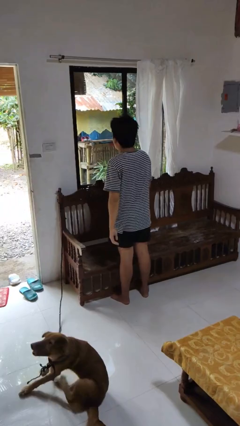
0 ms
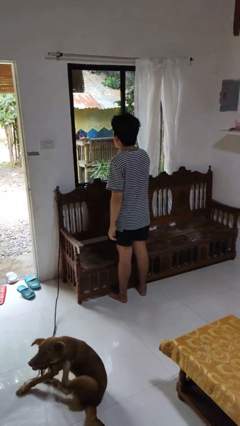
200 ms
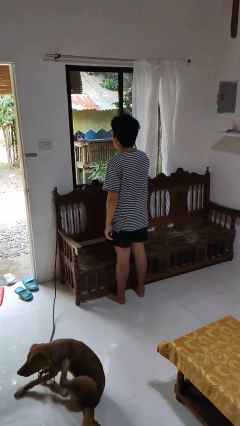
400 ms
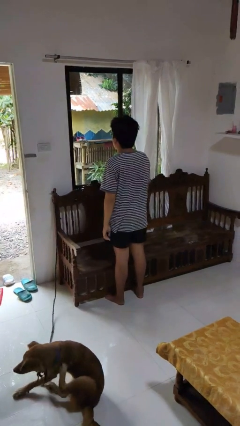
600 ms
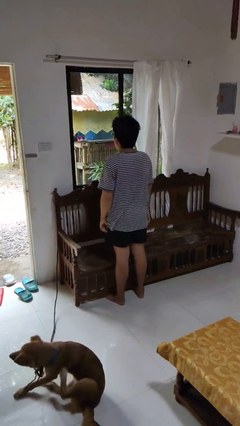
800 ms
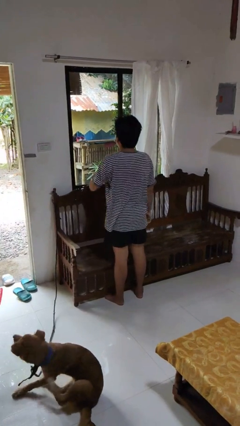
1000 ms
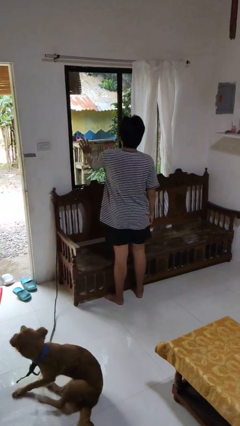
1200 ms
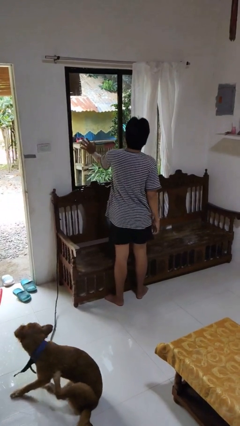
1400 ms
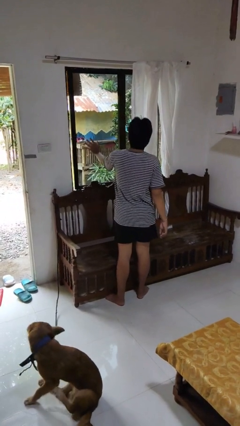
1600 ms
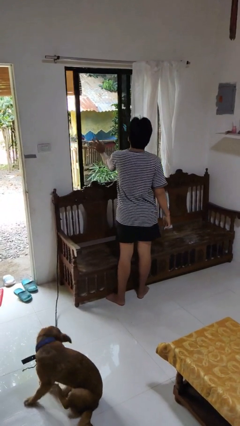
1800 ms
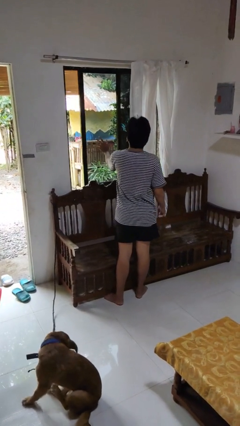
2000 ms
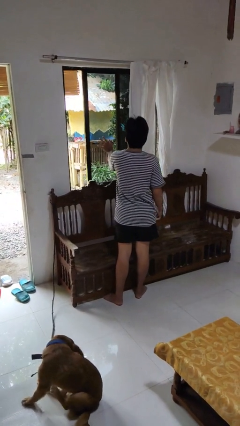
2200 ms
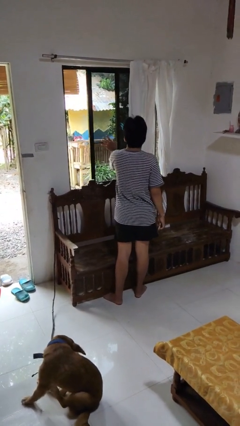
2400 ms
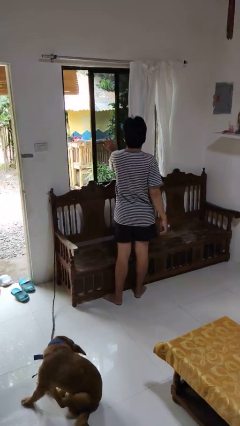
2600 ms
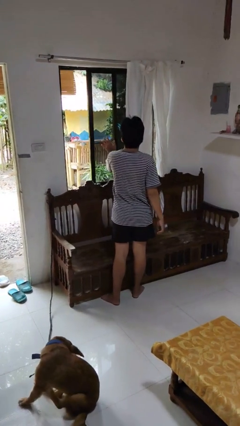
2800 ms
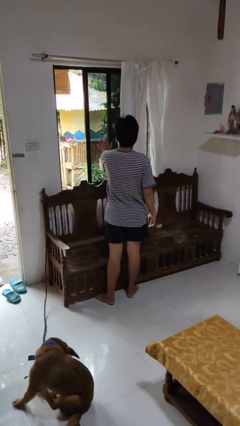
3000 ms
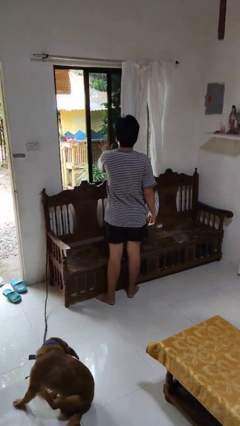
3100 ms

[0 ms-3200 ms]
person opens home window

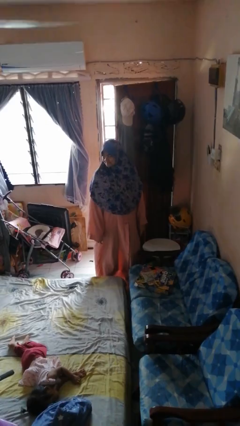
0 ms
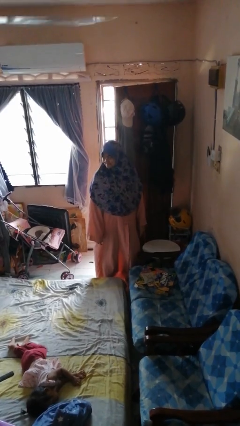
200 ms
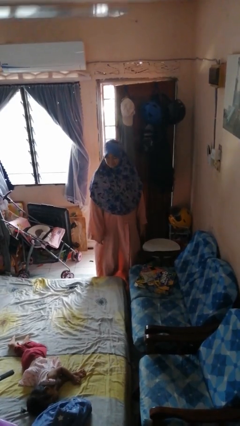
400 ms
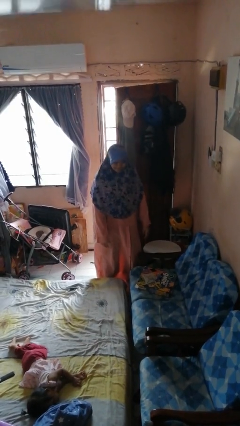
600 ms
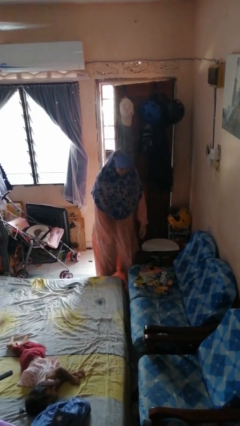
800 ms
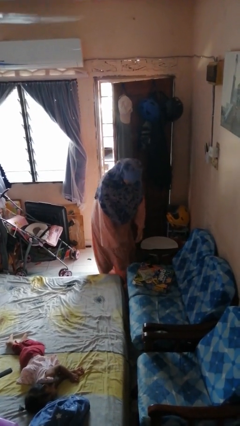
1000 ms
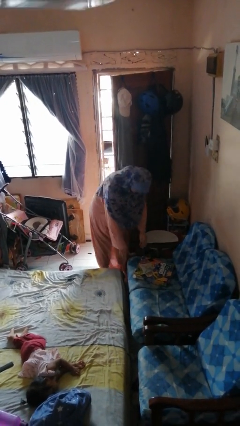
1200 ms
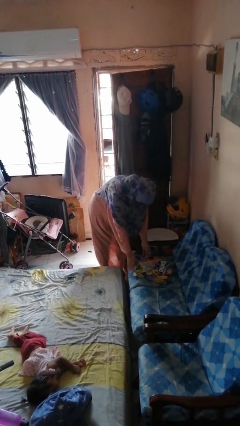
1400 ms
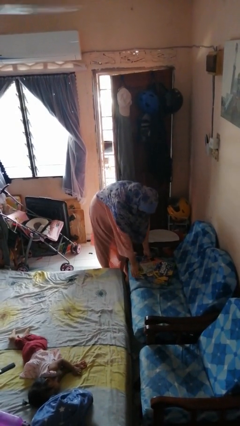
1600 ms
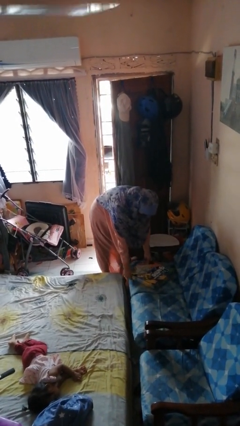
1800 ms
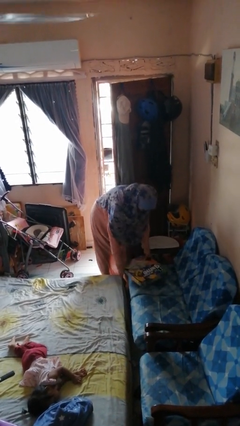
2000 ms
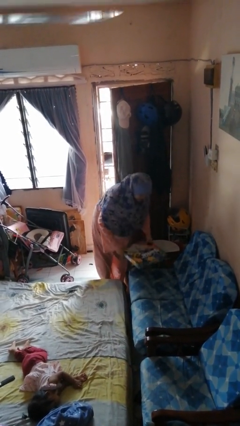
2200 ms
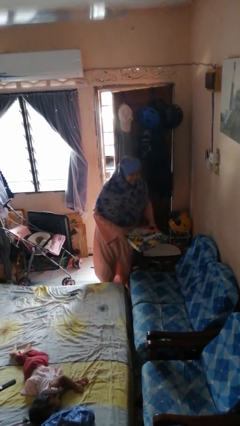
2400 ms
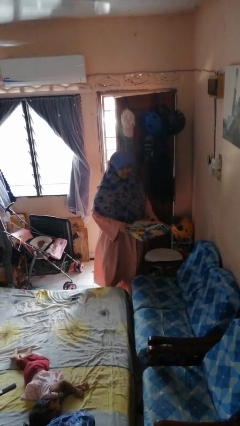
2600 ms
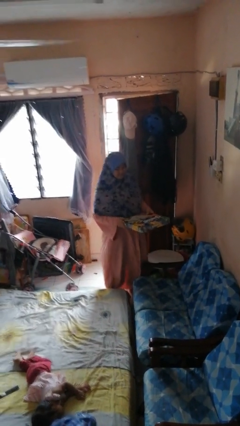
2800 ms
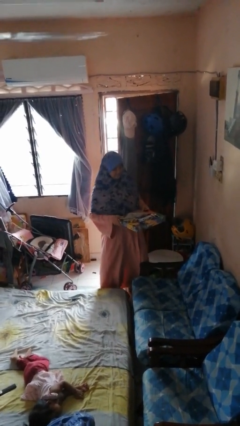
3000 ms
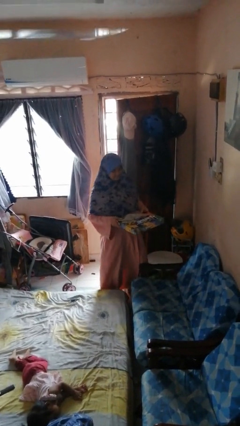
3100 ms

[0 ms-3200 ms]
person picks up object from couch

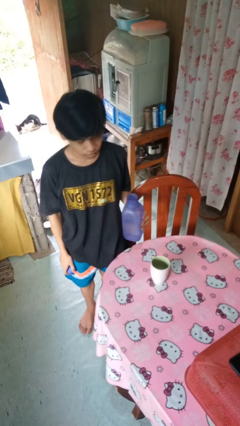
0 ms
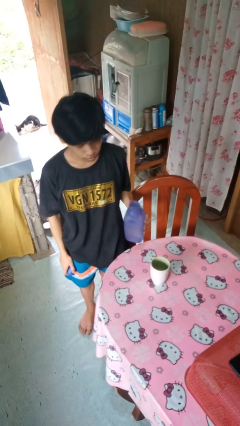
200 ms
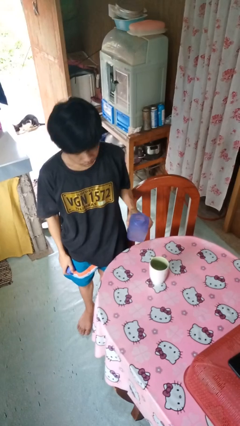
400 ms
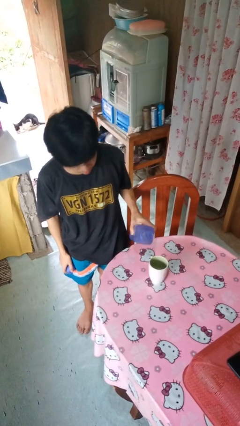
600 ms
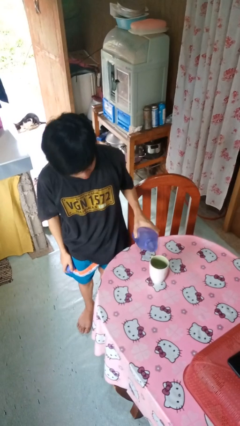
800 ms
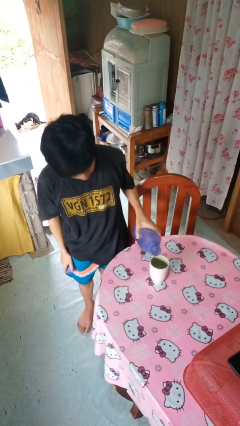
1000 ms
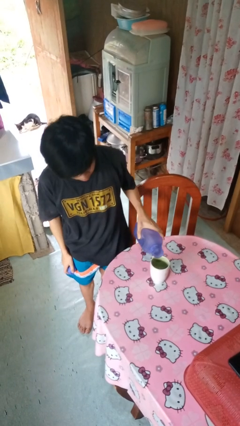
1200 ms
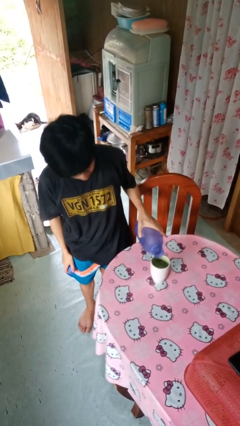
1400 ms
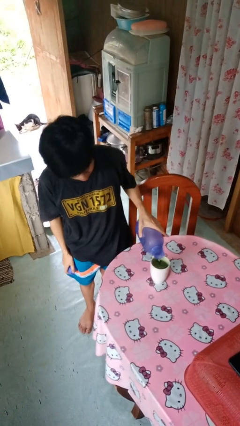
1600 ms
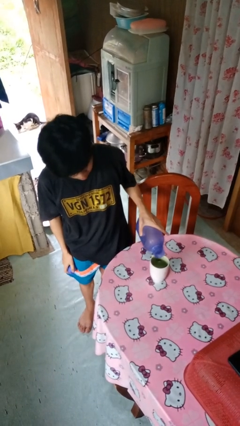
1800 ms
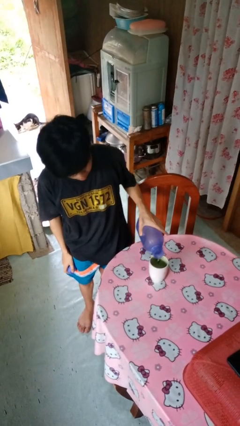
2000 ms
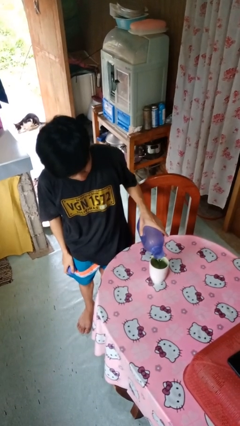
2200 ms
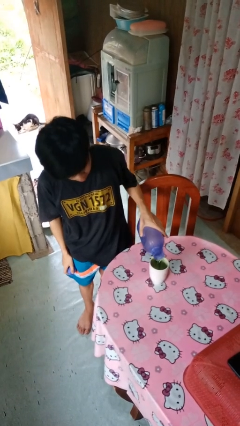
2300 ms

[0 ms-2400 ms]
person pours liquid into cup

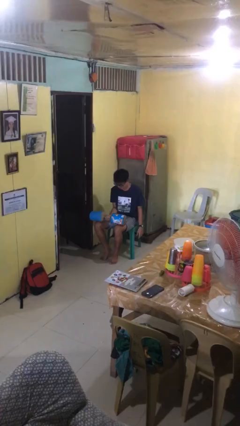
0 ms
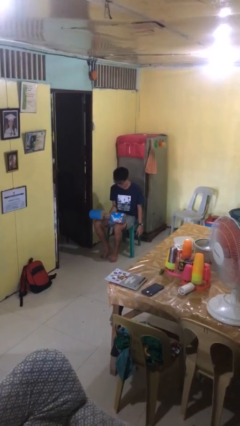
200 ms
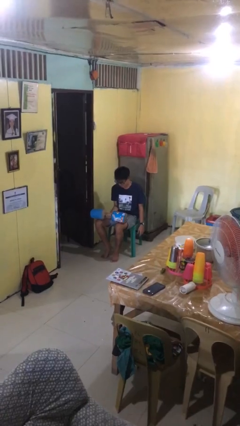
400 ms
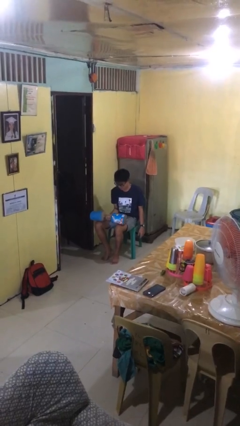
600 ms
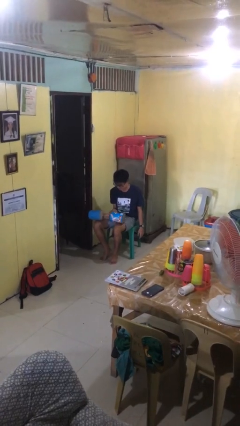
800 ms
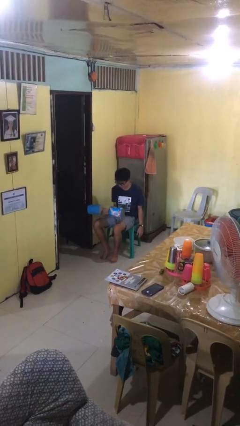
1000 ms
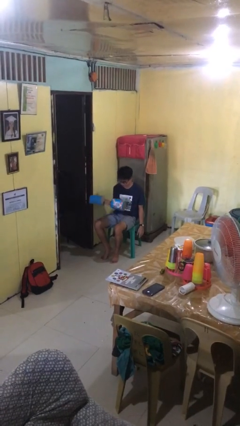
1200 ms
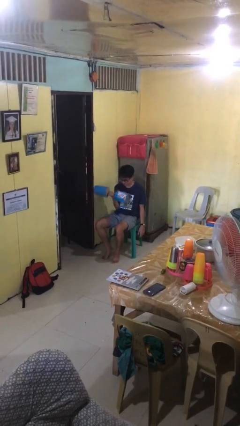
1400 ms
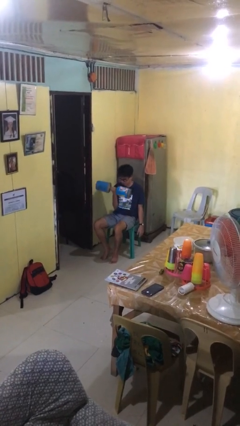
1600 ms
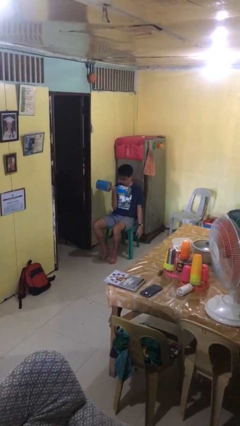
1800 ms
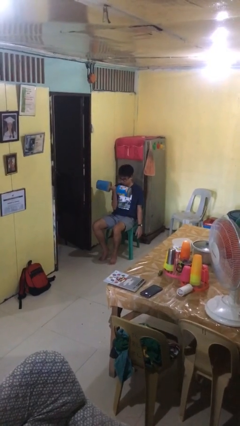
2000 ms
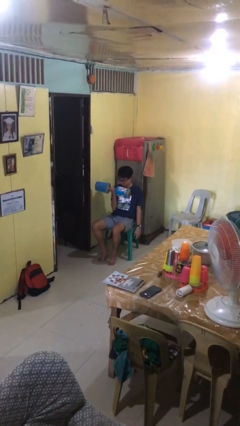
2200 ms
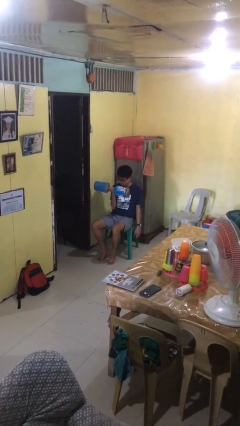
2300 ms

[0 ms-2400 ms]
person lifts dumbbells

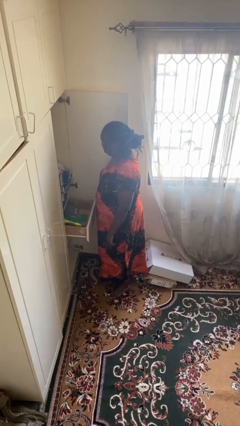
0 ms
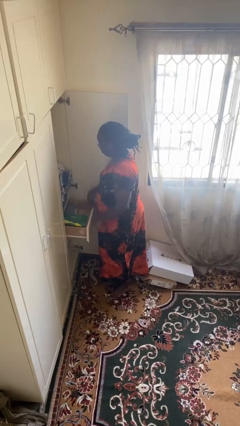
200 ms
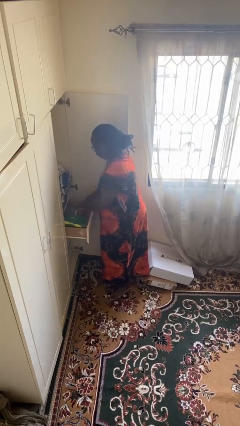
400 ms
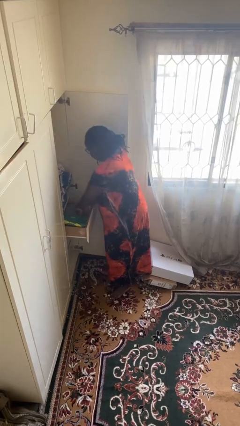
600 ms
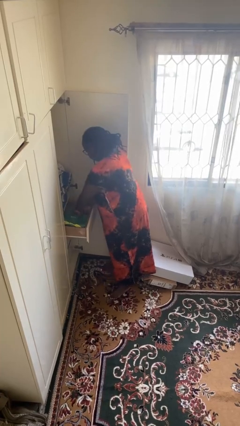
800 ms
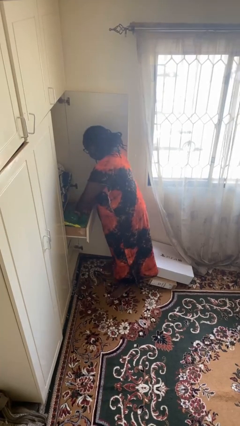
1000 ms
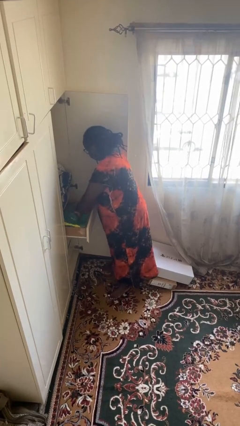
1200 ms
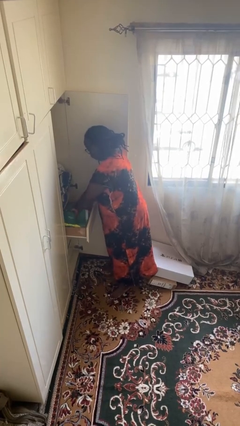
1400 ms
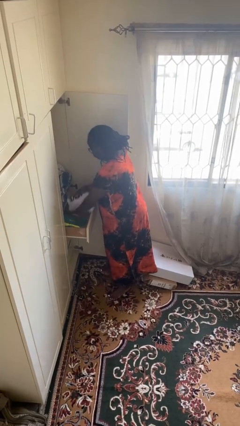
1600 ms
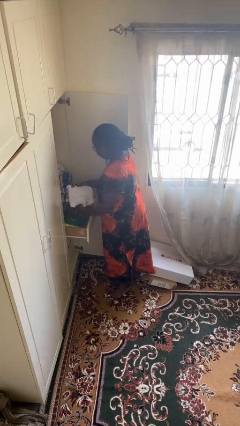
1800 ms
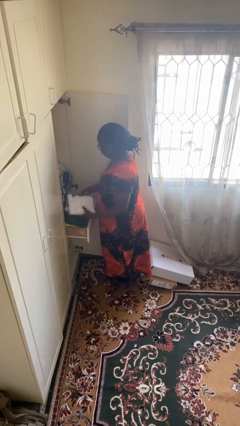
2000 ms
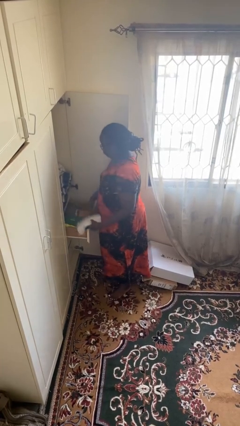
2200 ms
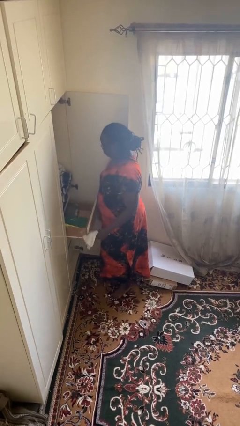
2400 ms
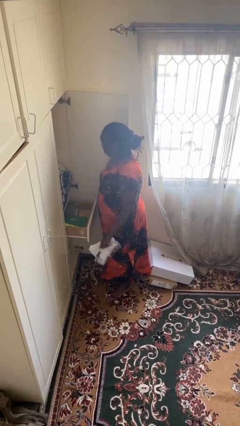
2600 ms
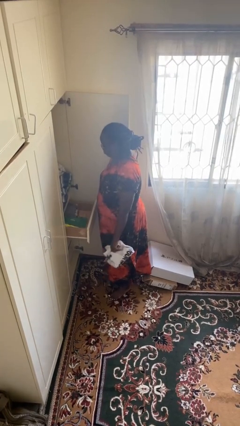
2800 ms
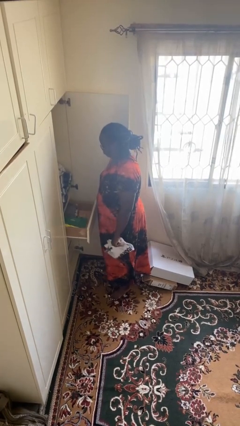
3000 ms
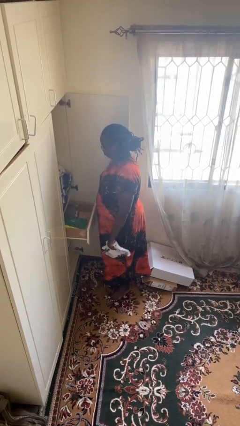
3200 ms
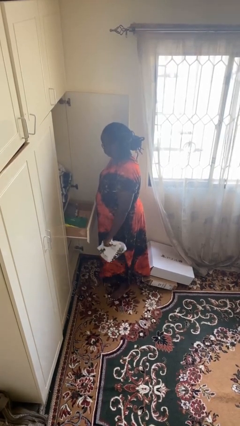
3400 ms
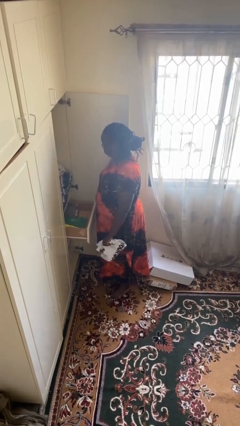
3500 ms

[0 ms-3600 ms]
person takes clothes from dresser

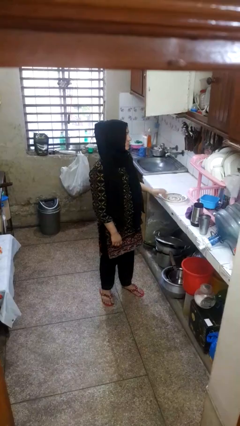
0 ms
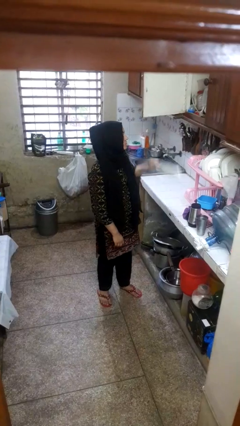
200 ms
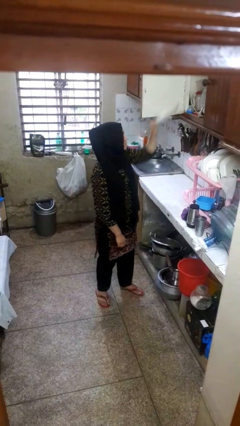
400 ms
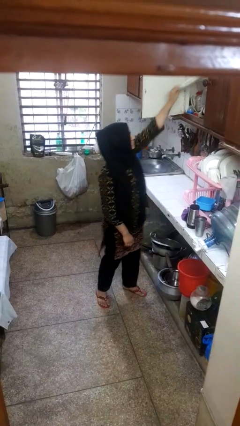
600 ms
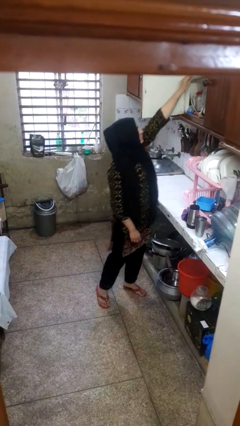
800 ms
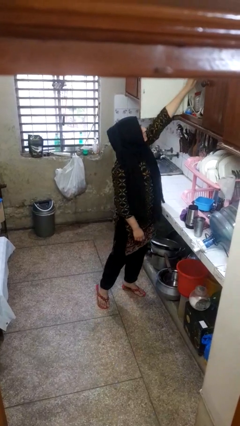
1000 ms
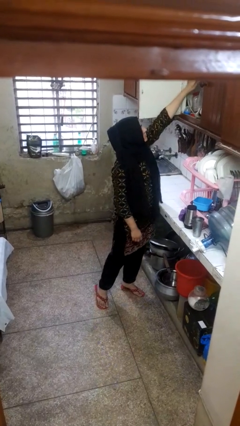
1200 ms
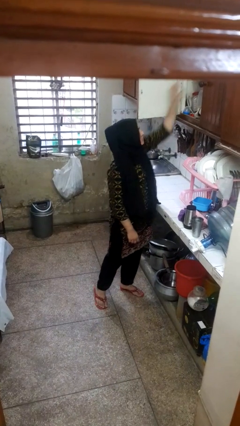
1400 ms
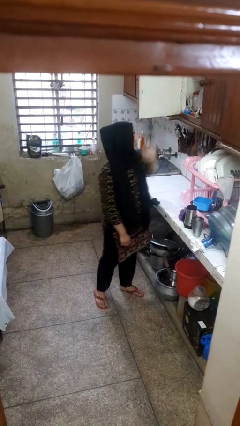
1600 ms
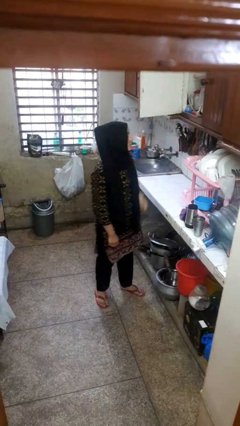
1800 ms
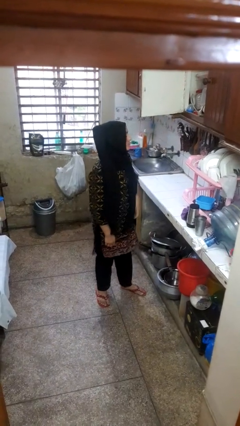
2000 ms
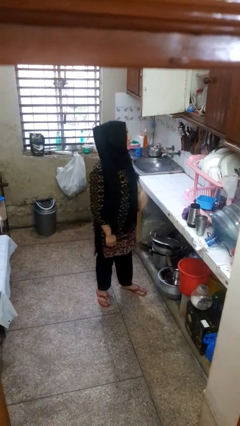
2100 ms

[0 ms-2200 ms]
person puts object in cabinet

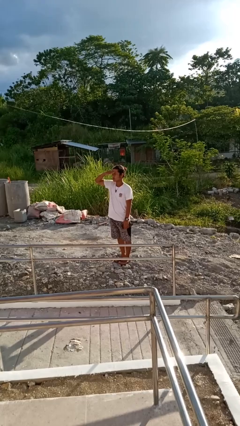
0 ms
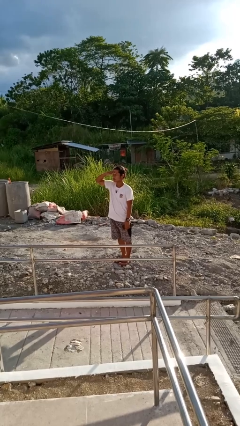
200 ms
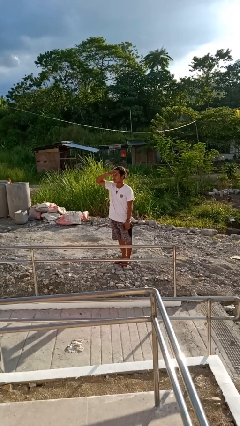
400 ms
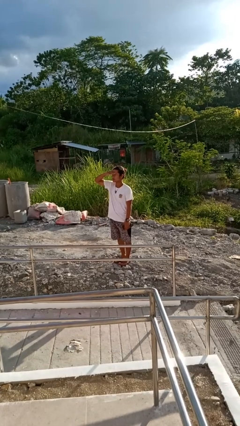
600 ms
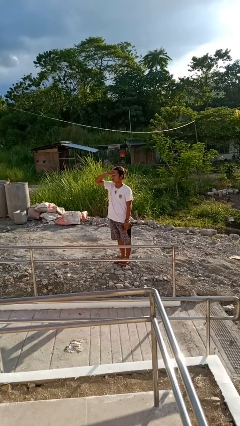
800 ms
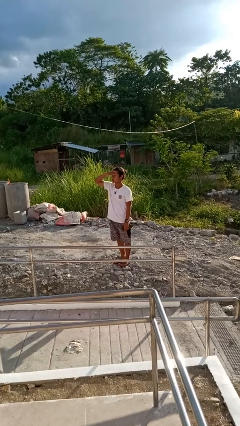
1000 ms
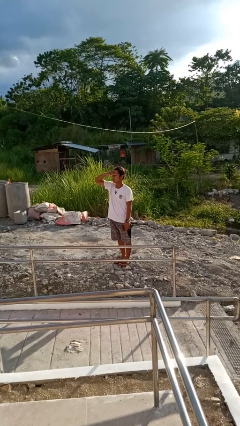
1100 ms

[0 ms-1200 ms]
person shades eyes
